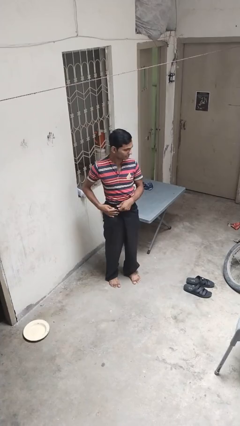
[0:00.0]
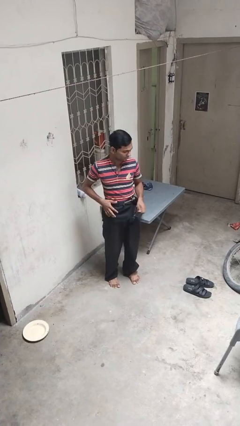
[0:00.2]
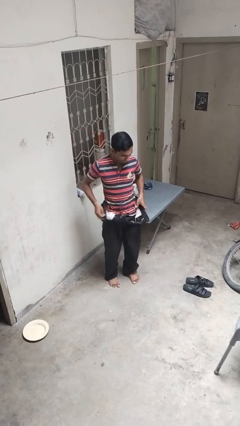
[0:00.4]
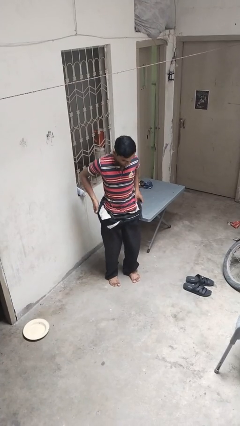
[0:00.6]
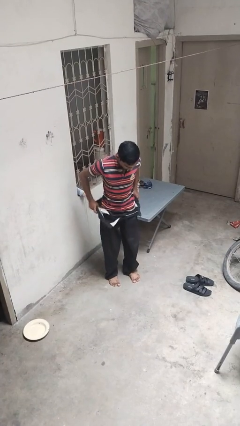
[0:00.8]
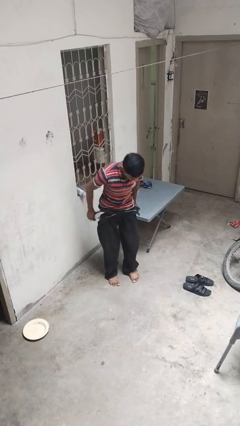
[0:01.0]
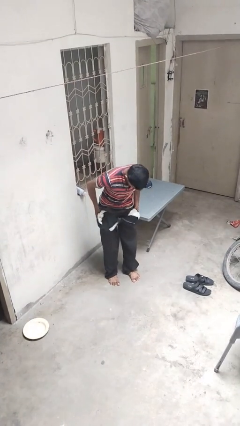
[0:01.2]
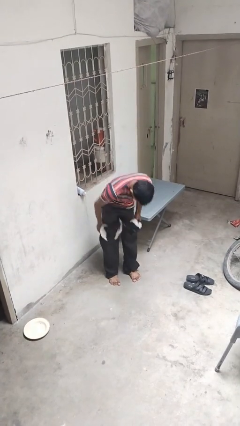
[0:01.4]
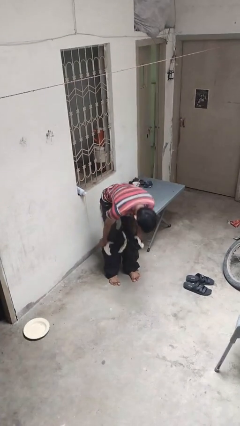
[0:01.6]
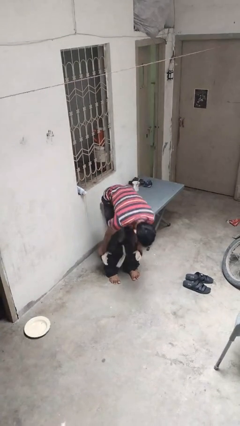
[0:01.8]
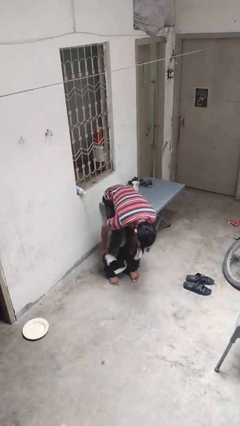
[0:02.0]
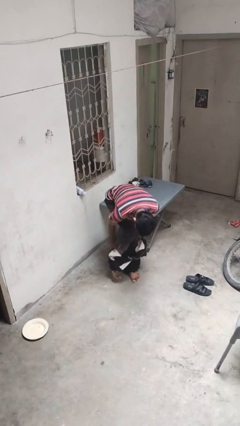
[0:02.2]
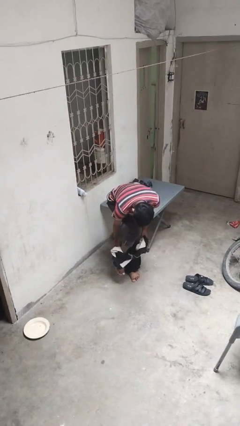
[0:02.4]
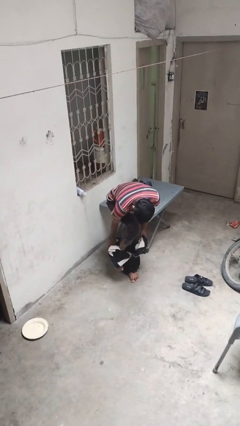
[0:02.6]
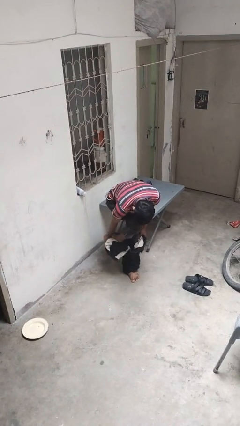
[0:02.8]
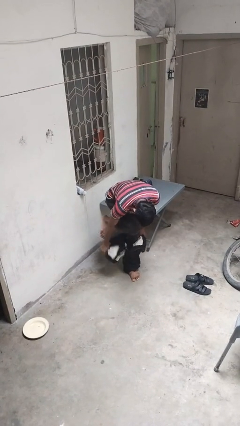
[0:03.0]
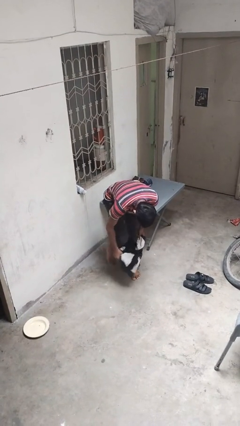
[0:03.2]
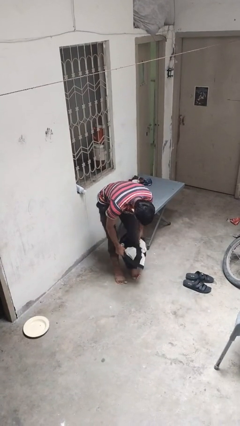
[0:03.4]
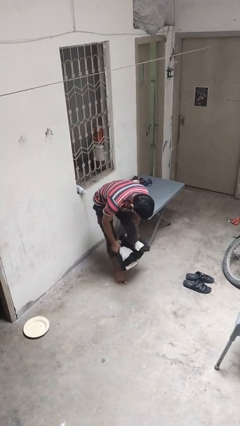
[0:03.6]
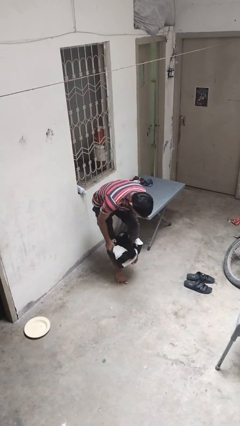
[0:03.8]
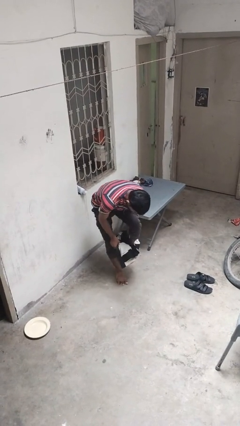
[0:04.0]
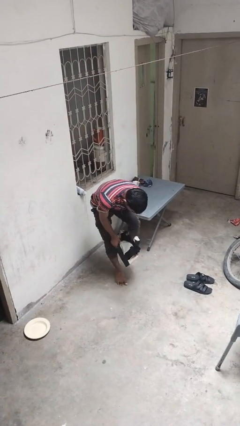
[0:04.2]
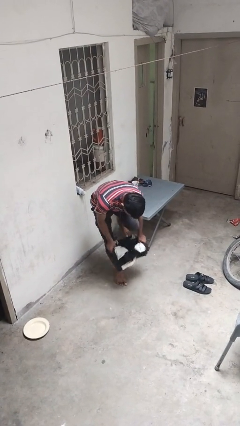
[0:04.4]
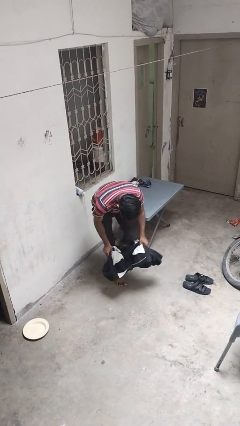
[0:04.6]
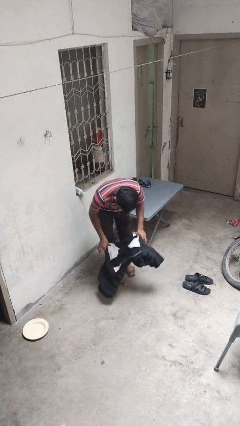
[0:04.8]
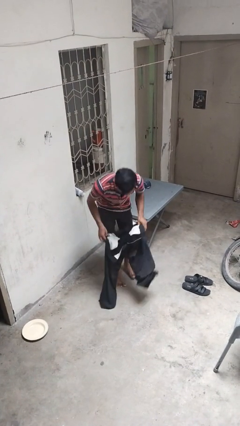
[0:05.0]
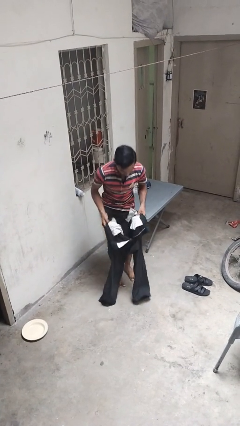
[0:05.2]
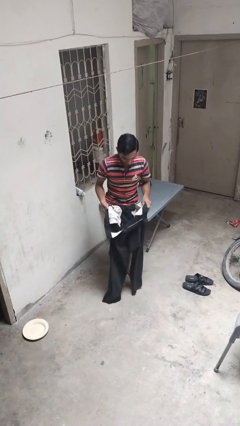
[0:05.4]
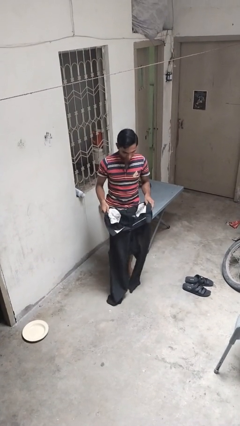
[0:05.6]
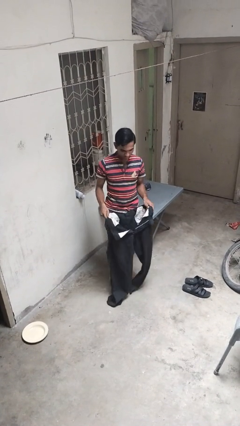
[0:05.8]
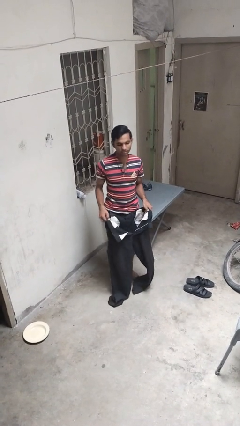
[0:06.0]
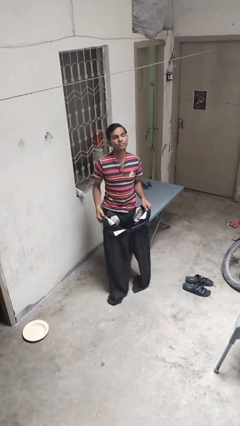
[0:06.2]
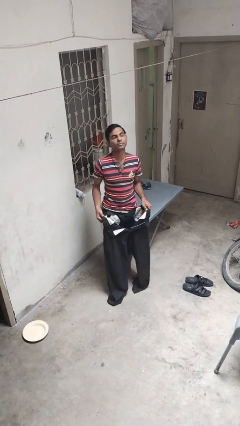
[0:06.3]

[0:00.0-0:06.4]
person takes off pants

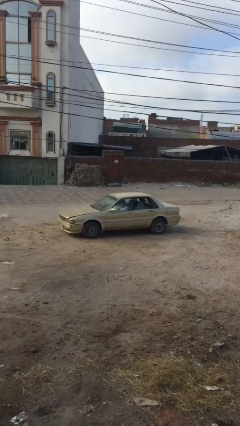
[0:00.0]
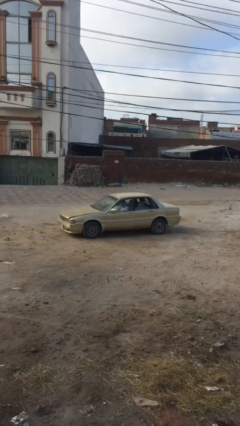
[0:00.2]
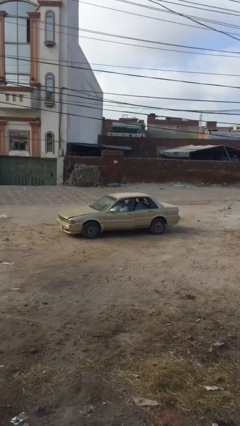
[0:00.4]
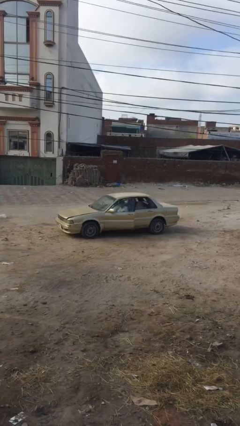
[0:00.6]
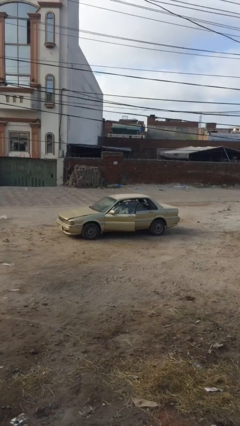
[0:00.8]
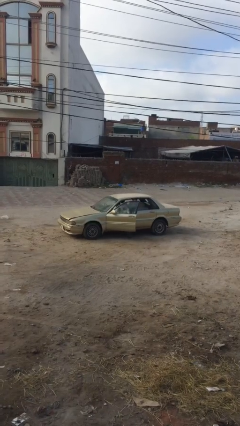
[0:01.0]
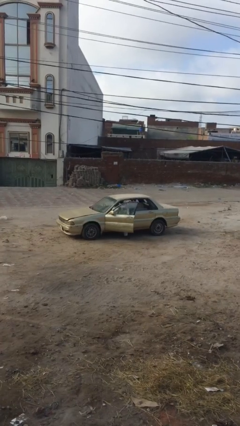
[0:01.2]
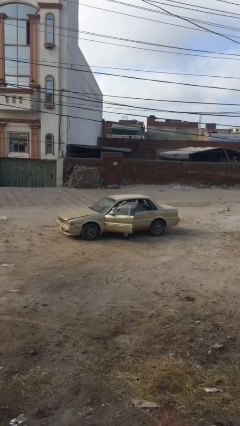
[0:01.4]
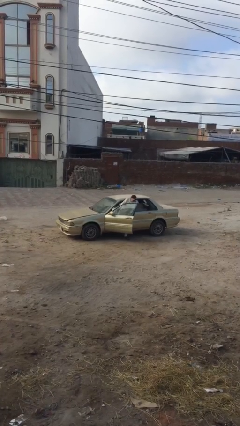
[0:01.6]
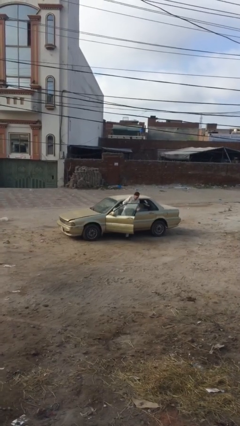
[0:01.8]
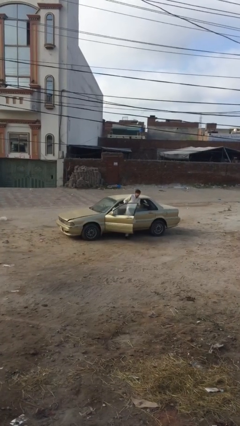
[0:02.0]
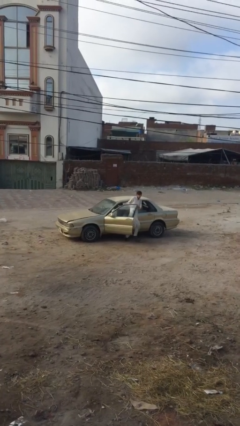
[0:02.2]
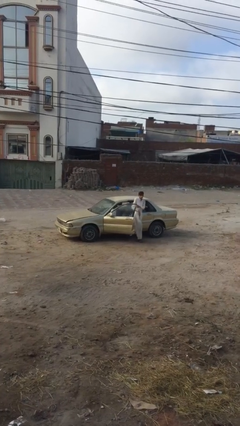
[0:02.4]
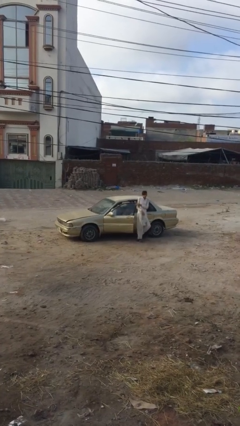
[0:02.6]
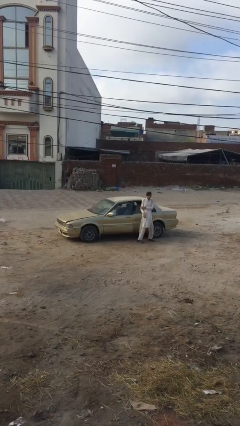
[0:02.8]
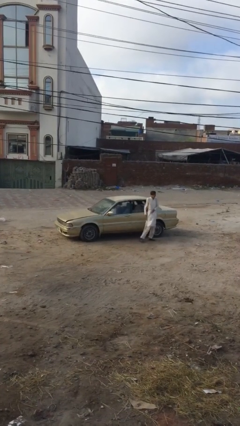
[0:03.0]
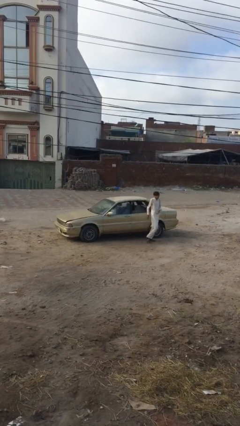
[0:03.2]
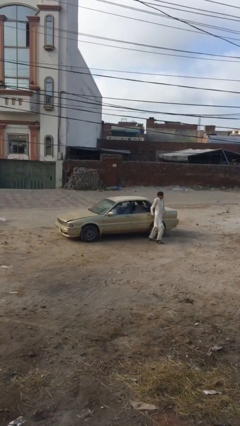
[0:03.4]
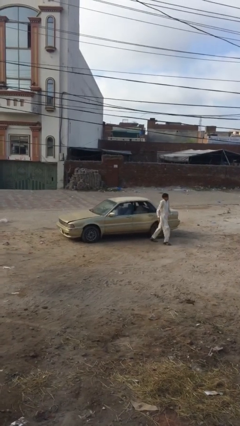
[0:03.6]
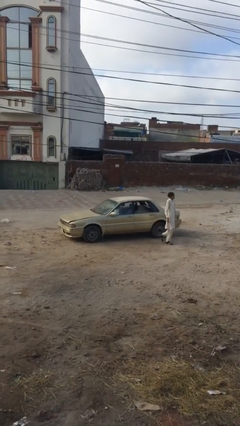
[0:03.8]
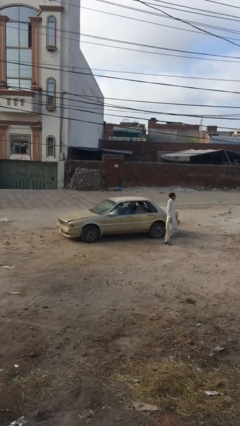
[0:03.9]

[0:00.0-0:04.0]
car drops off person

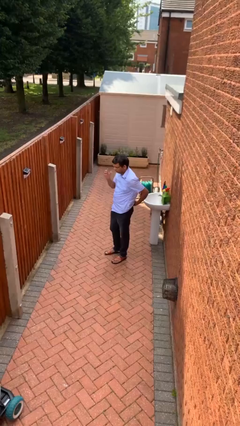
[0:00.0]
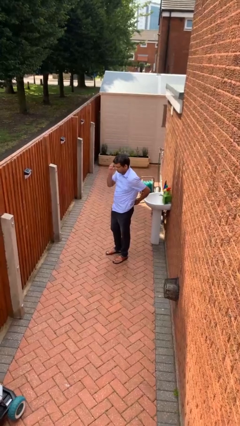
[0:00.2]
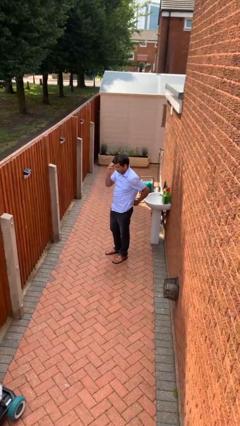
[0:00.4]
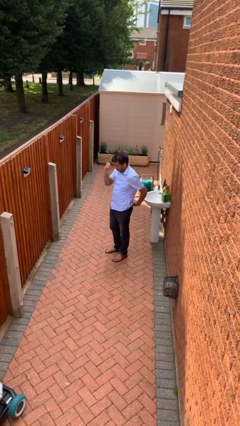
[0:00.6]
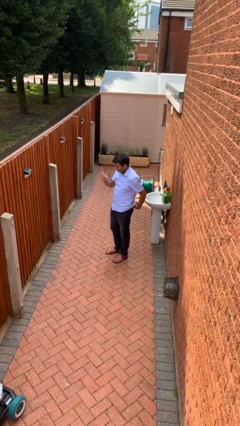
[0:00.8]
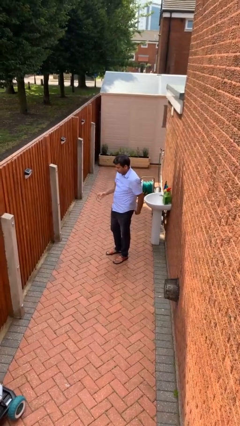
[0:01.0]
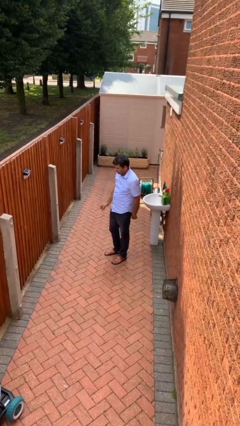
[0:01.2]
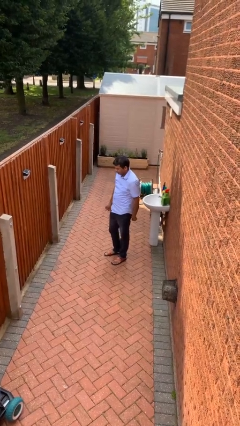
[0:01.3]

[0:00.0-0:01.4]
person takes off glasses

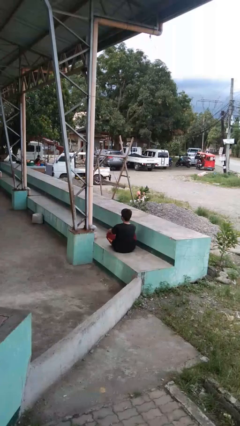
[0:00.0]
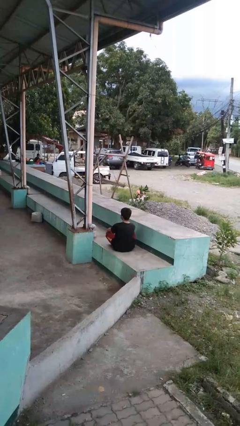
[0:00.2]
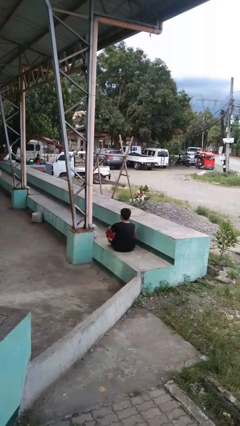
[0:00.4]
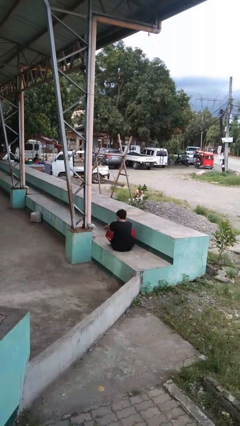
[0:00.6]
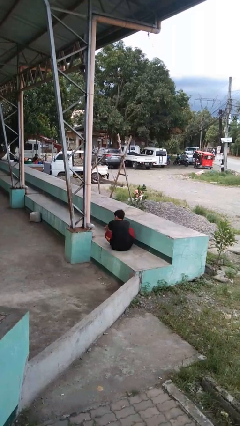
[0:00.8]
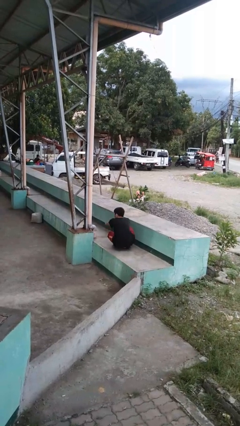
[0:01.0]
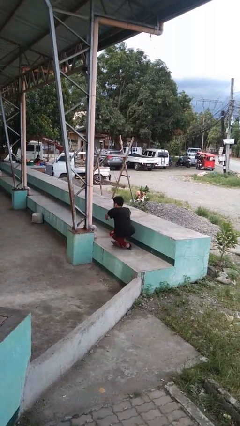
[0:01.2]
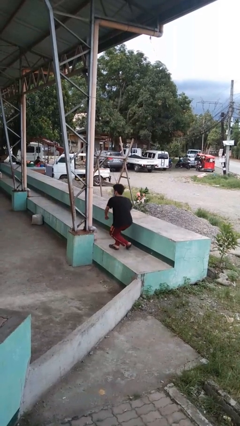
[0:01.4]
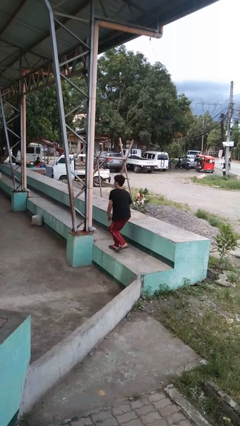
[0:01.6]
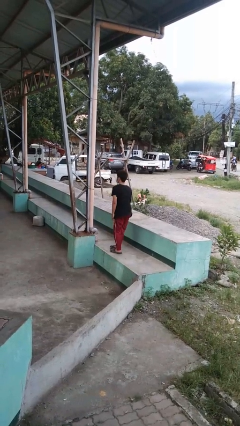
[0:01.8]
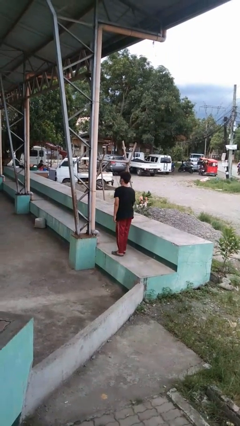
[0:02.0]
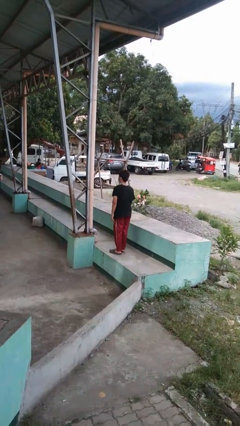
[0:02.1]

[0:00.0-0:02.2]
person stands up from floor

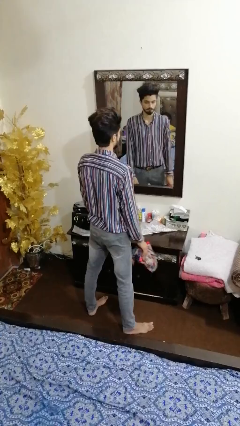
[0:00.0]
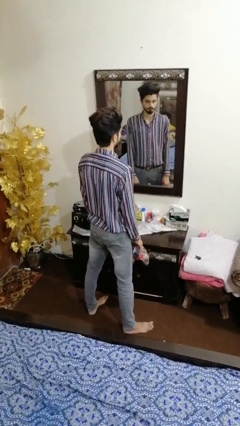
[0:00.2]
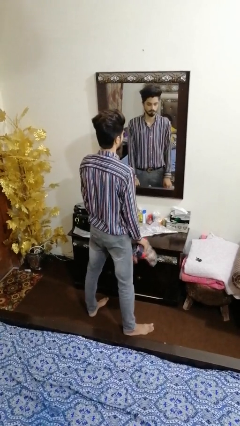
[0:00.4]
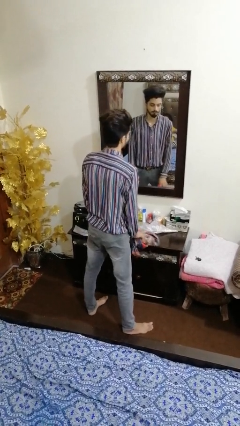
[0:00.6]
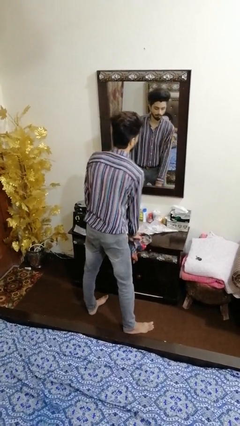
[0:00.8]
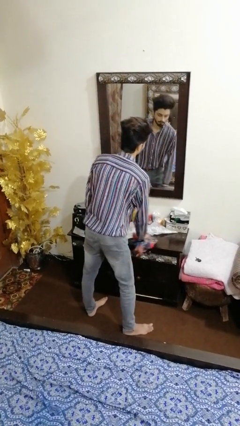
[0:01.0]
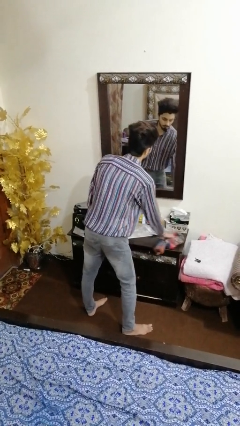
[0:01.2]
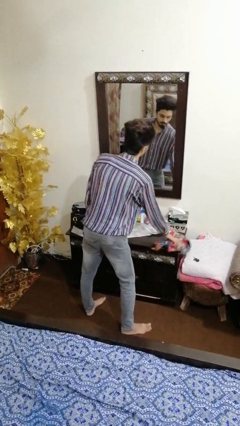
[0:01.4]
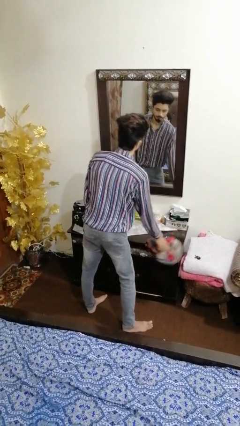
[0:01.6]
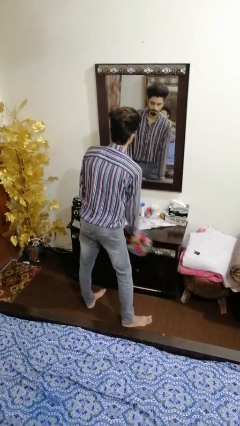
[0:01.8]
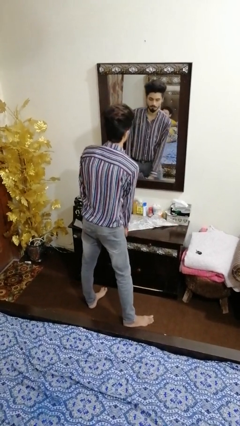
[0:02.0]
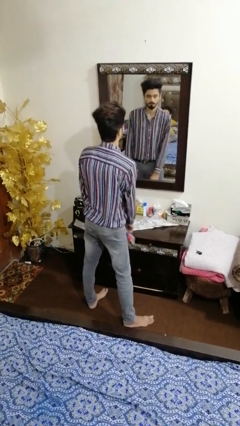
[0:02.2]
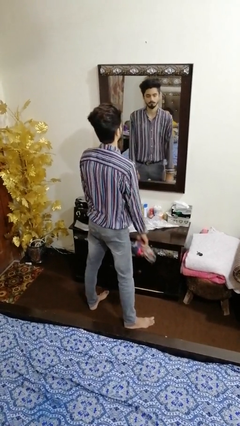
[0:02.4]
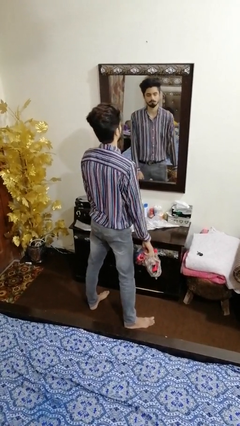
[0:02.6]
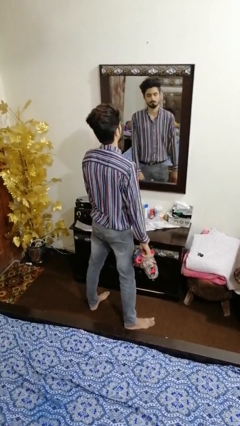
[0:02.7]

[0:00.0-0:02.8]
person cleans table with rag

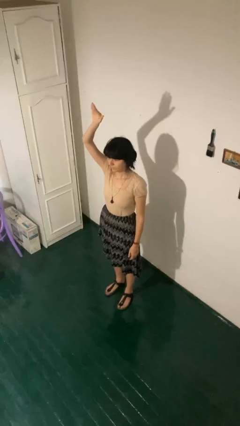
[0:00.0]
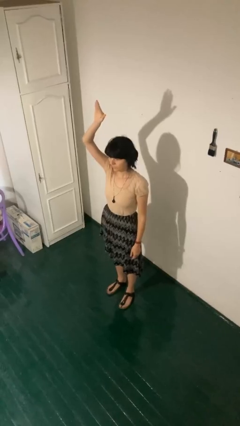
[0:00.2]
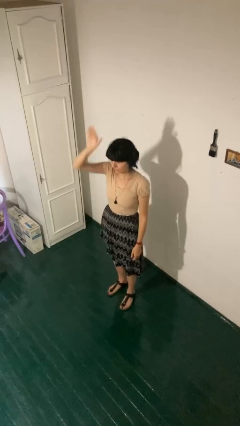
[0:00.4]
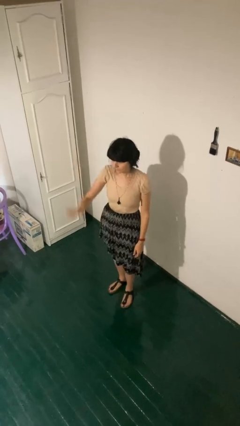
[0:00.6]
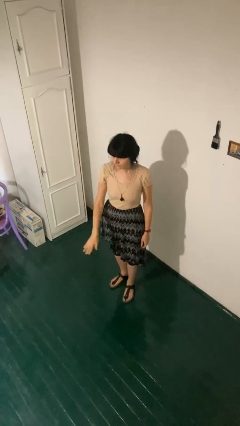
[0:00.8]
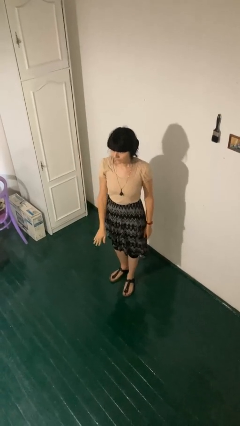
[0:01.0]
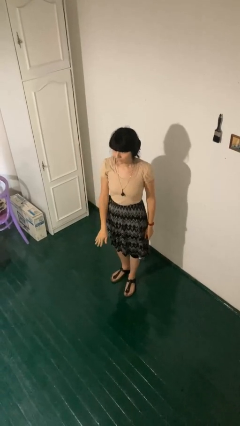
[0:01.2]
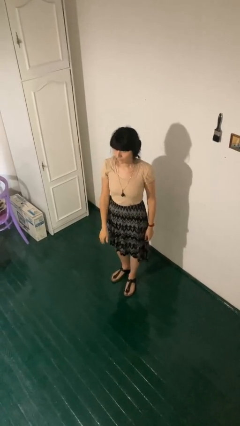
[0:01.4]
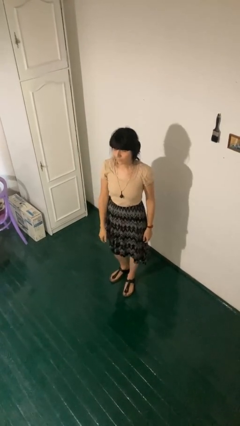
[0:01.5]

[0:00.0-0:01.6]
person gestures swipe down
